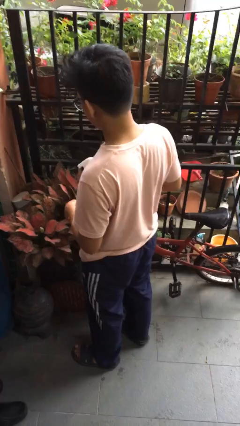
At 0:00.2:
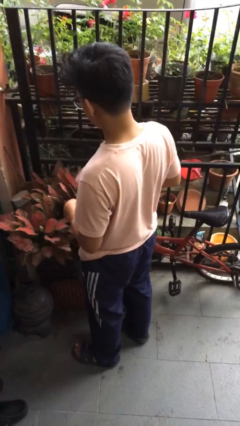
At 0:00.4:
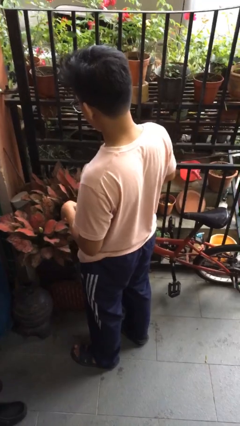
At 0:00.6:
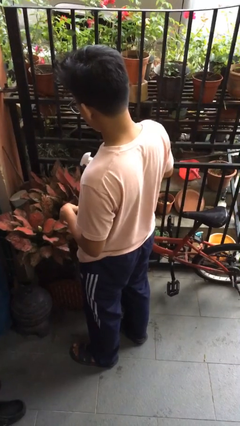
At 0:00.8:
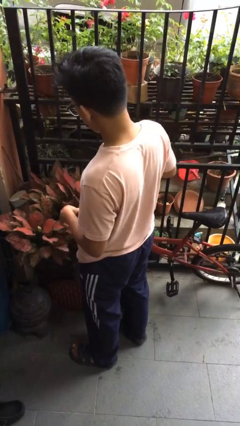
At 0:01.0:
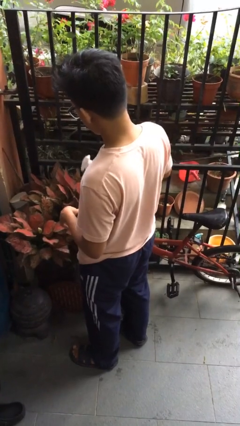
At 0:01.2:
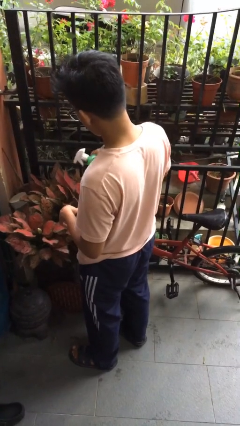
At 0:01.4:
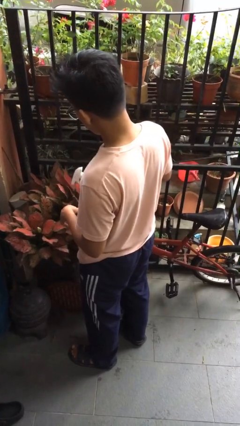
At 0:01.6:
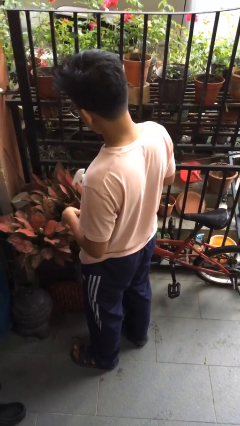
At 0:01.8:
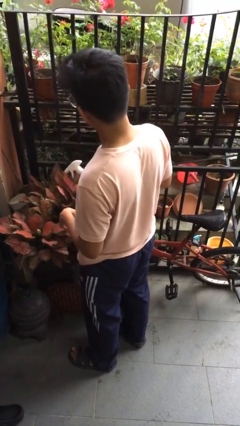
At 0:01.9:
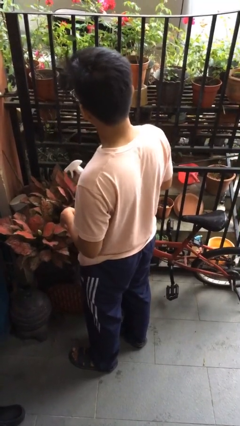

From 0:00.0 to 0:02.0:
person waters houseplant

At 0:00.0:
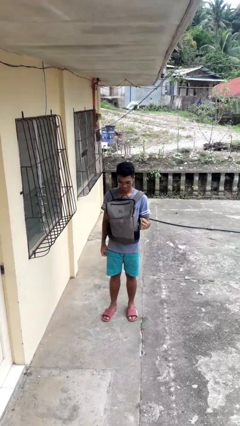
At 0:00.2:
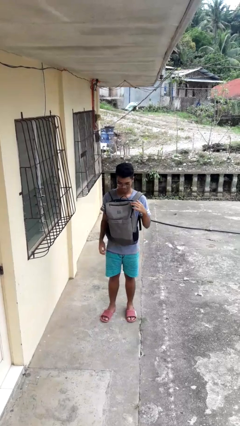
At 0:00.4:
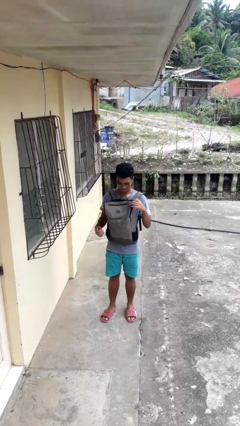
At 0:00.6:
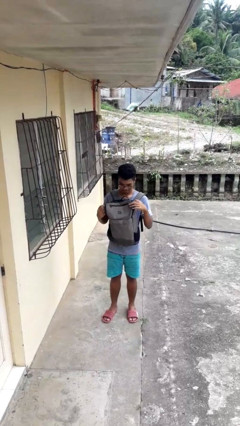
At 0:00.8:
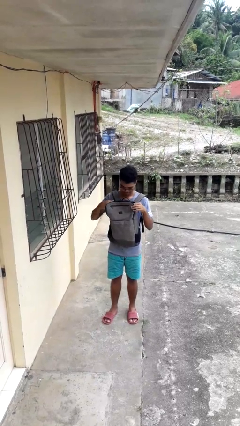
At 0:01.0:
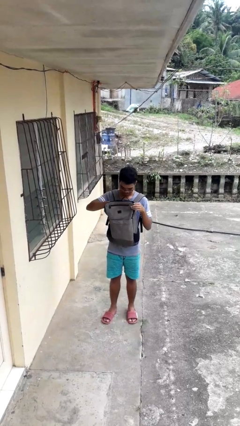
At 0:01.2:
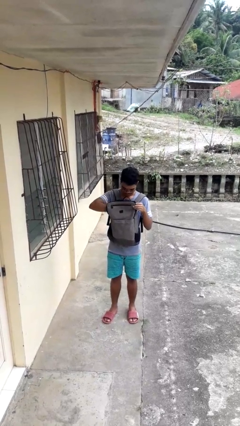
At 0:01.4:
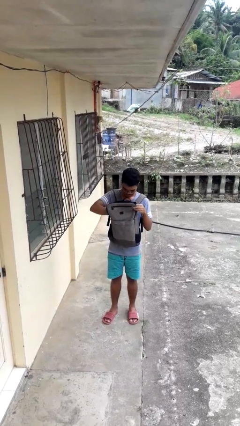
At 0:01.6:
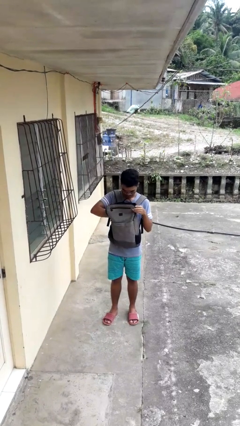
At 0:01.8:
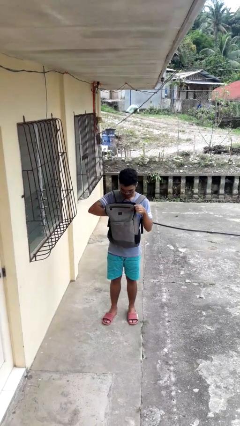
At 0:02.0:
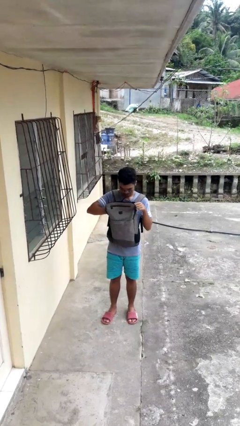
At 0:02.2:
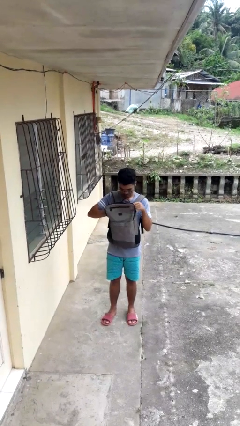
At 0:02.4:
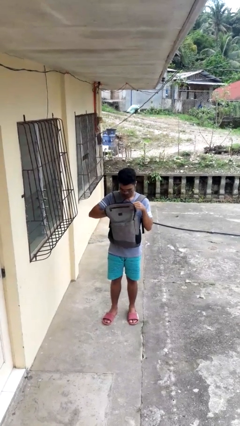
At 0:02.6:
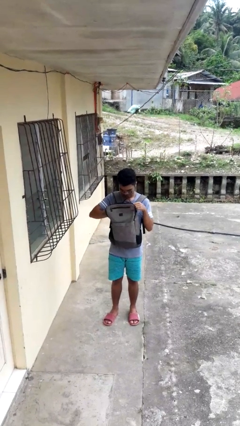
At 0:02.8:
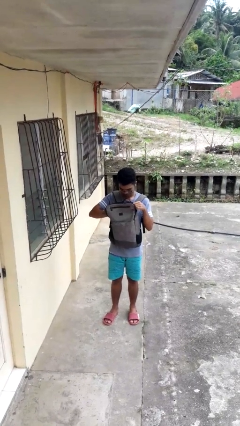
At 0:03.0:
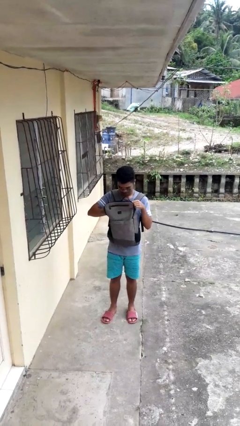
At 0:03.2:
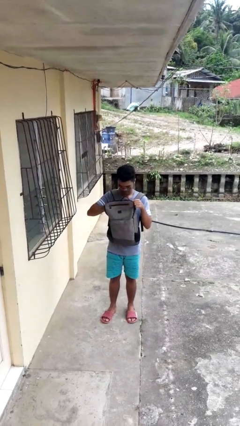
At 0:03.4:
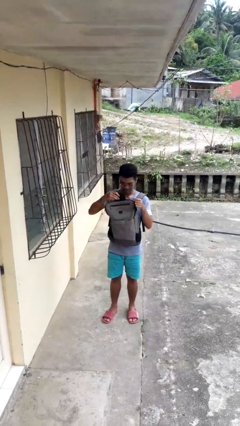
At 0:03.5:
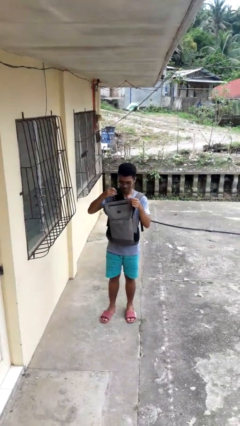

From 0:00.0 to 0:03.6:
person searches in backpack

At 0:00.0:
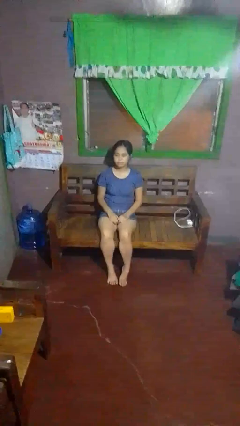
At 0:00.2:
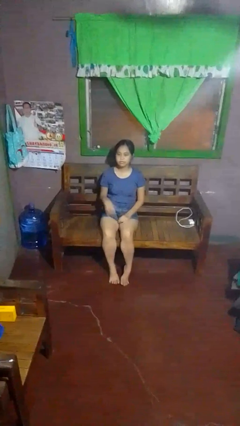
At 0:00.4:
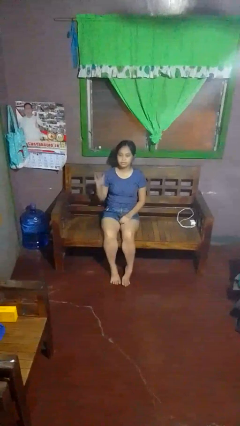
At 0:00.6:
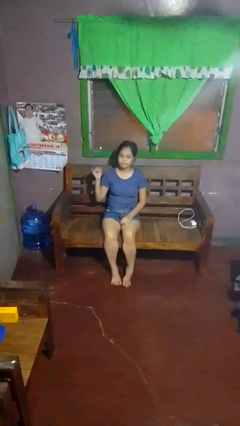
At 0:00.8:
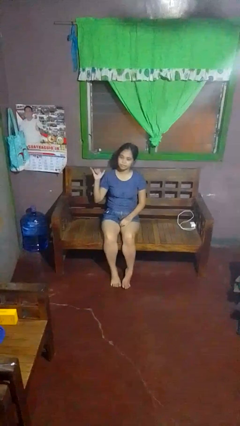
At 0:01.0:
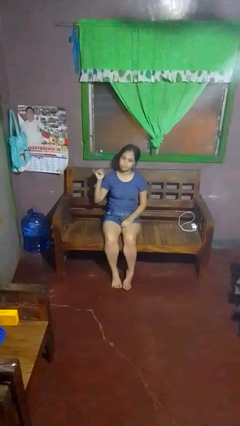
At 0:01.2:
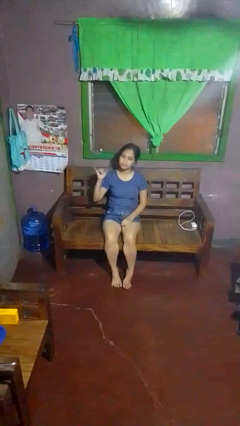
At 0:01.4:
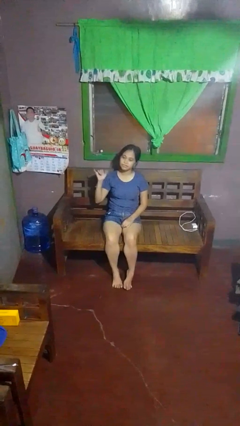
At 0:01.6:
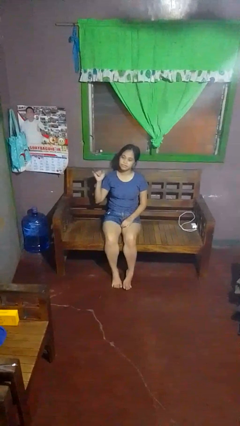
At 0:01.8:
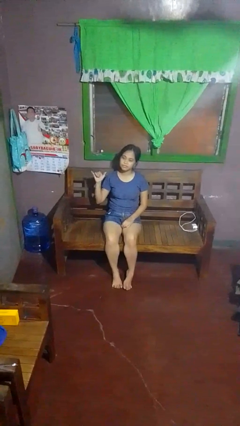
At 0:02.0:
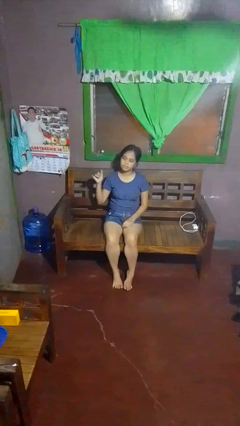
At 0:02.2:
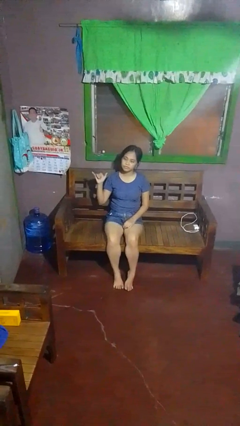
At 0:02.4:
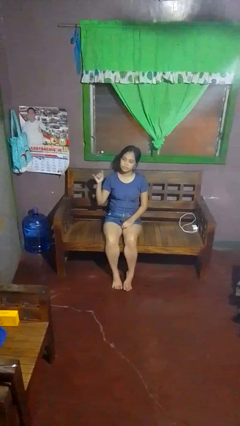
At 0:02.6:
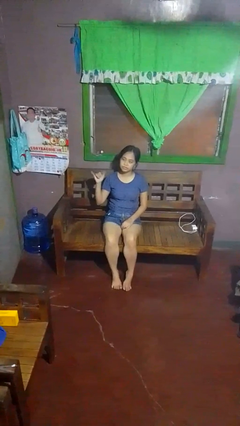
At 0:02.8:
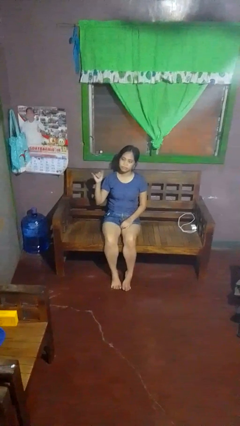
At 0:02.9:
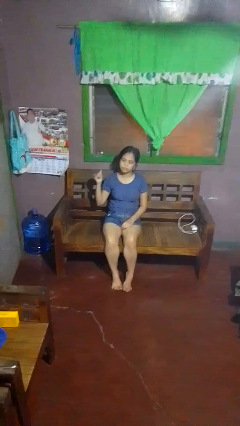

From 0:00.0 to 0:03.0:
person gestures hang loose

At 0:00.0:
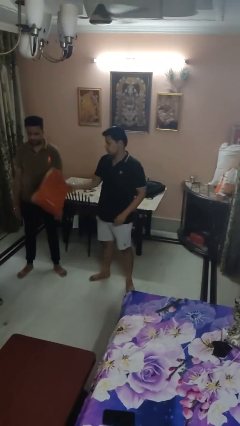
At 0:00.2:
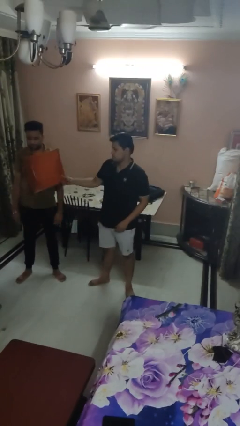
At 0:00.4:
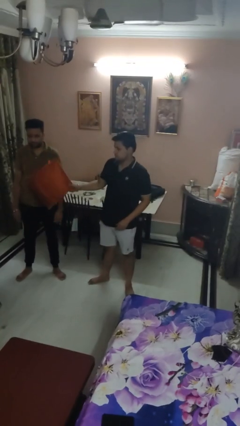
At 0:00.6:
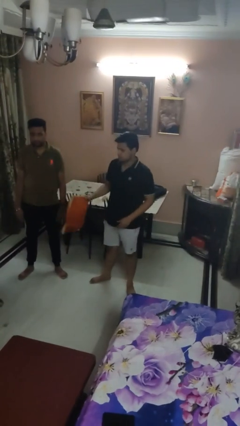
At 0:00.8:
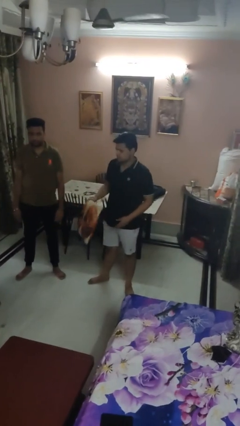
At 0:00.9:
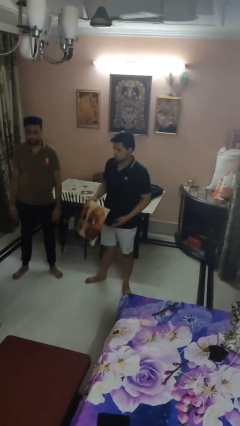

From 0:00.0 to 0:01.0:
person hits person with pillow

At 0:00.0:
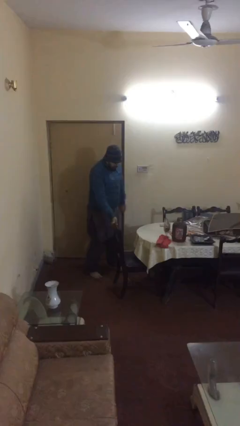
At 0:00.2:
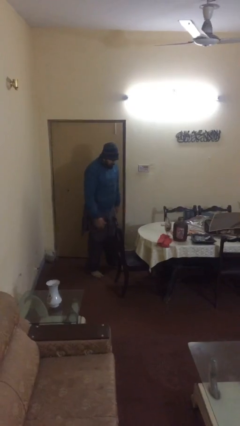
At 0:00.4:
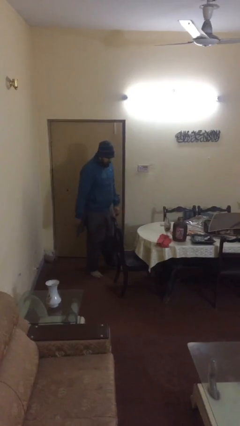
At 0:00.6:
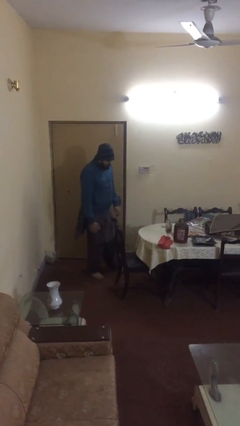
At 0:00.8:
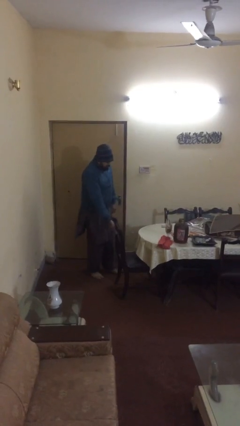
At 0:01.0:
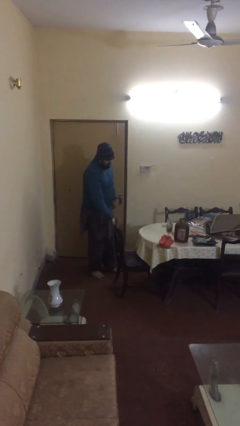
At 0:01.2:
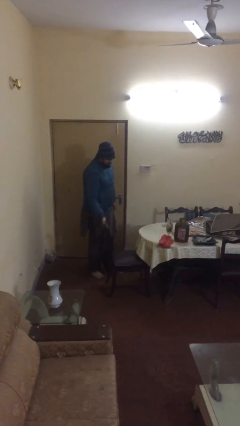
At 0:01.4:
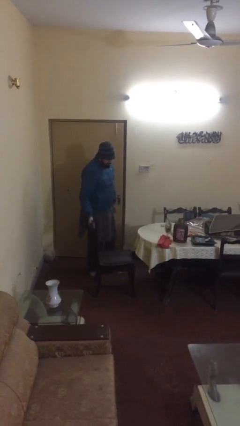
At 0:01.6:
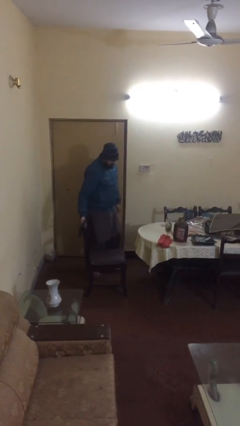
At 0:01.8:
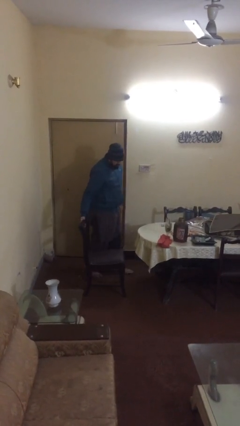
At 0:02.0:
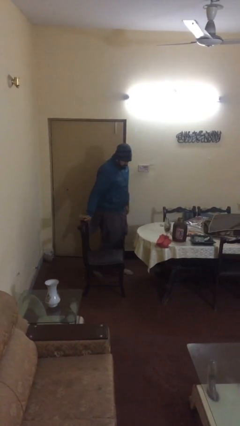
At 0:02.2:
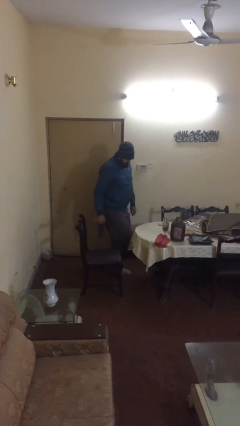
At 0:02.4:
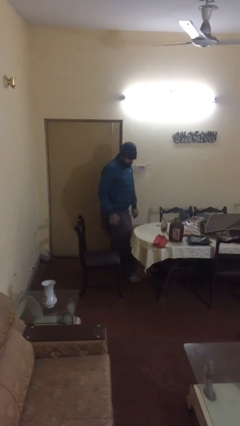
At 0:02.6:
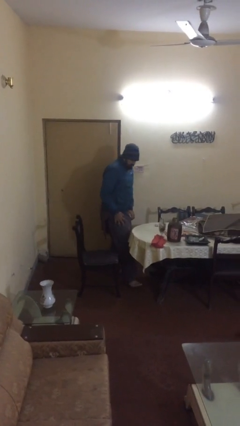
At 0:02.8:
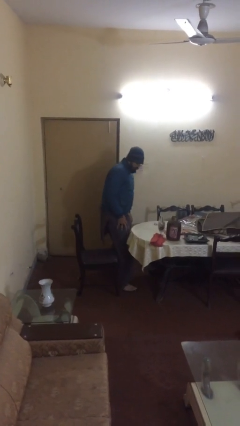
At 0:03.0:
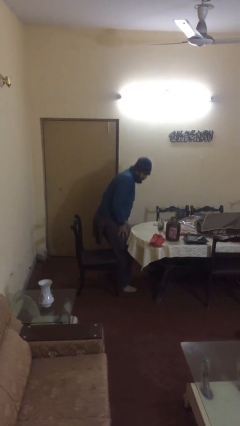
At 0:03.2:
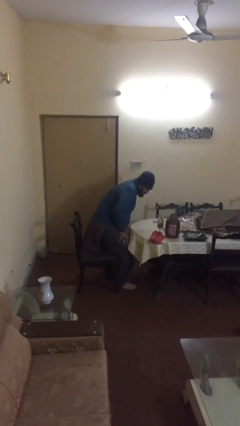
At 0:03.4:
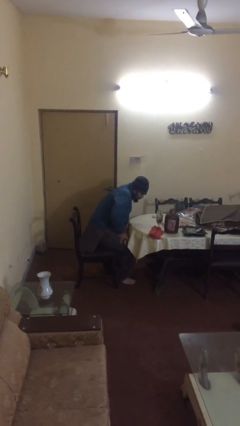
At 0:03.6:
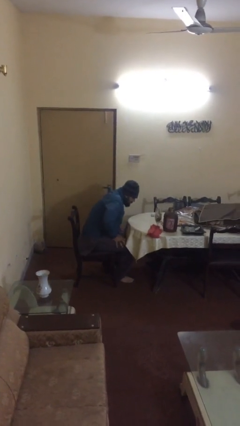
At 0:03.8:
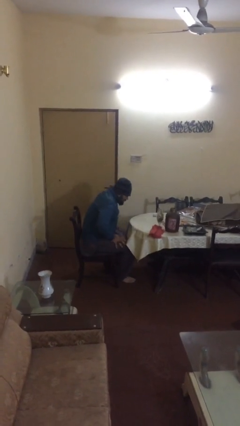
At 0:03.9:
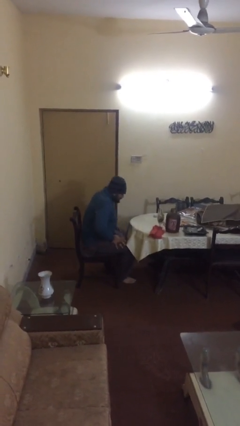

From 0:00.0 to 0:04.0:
person sits down

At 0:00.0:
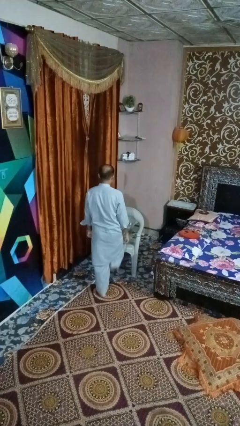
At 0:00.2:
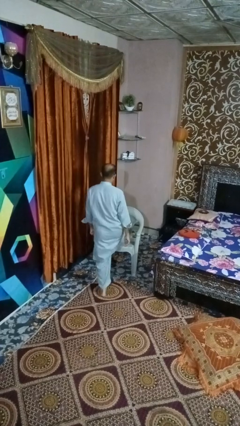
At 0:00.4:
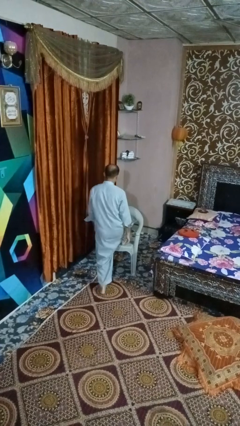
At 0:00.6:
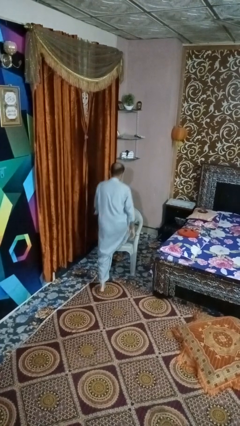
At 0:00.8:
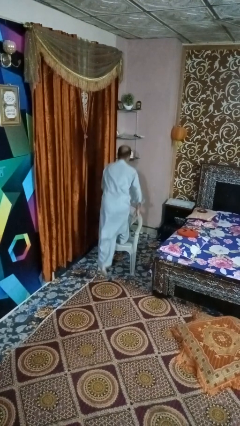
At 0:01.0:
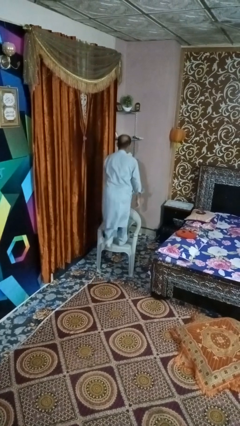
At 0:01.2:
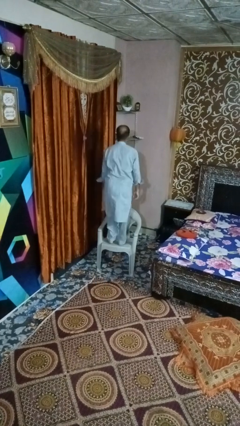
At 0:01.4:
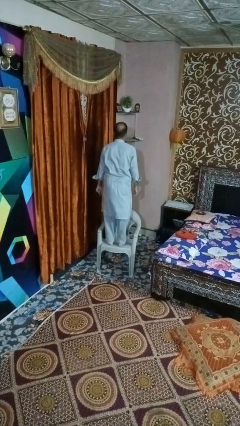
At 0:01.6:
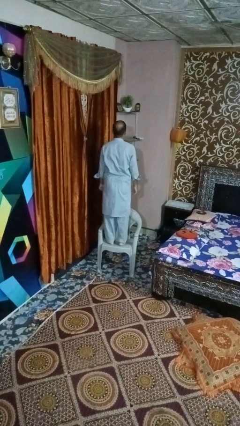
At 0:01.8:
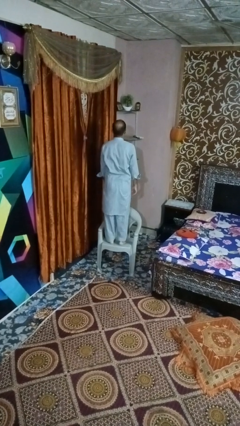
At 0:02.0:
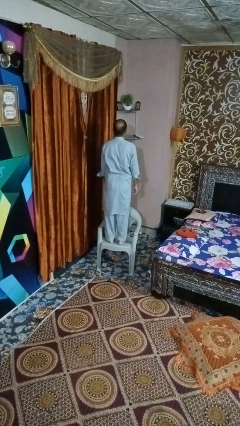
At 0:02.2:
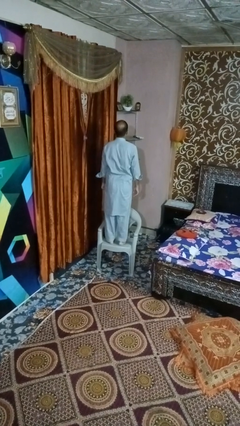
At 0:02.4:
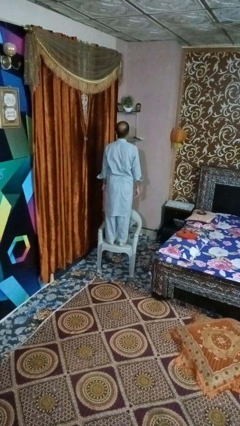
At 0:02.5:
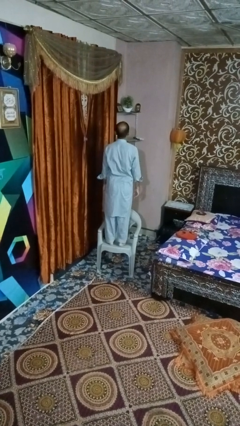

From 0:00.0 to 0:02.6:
person climbs on chair

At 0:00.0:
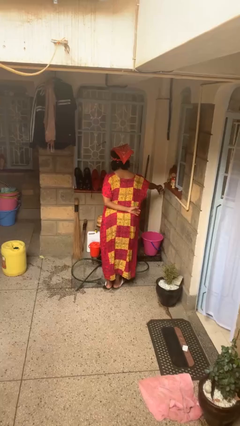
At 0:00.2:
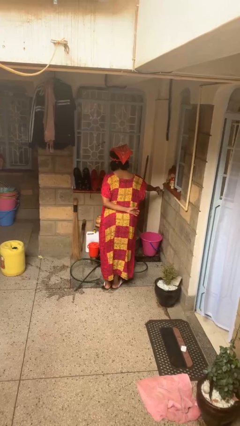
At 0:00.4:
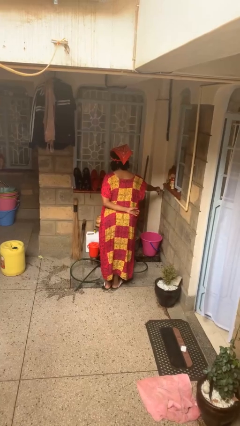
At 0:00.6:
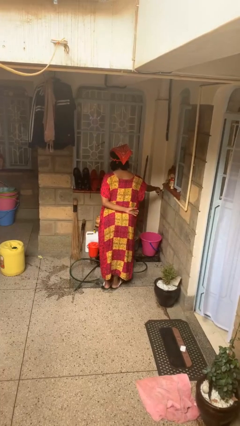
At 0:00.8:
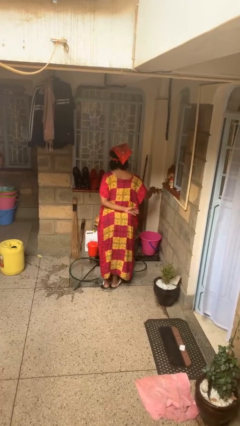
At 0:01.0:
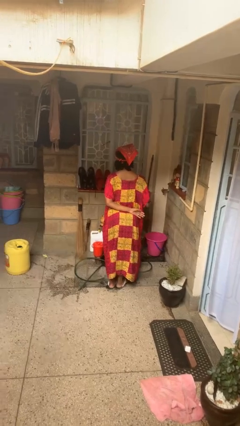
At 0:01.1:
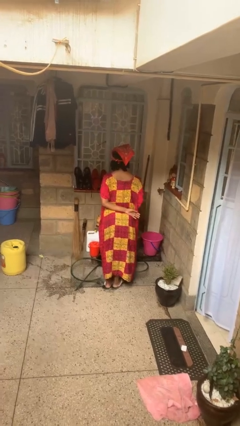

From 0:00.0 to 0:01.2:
person turns off faucet
